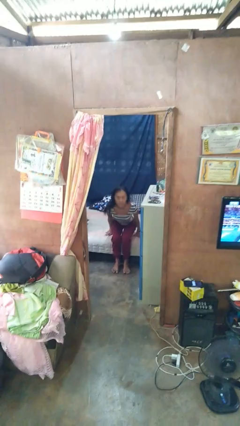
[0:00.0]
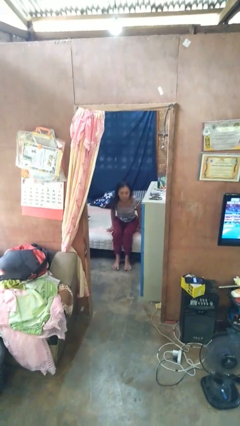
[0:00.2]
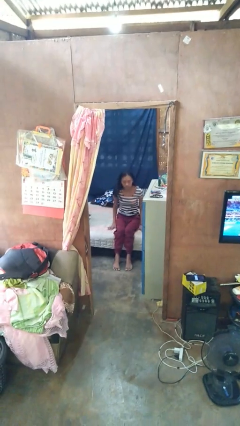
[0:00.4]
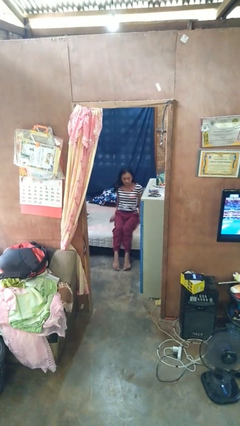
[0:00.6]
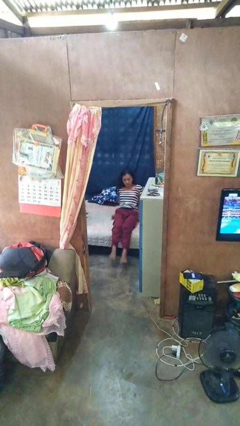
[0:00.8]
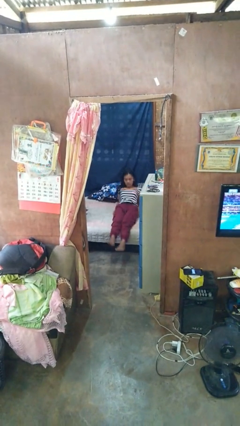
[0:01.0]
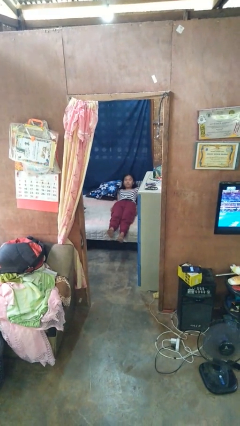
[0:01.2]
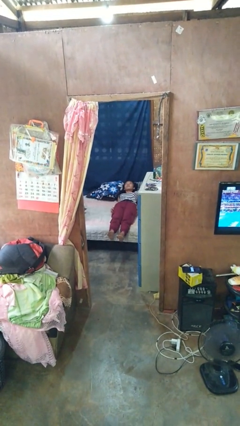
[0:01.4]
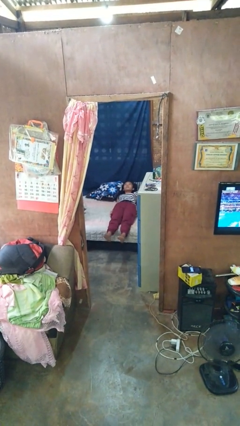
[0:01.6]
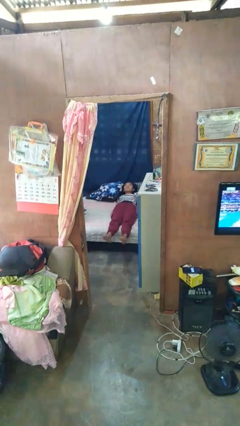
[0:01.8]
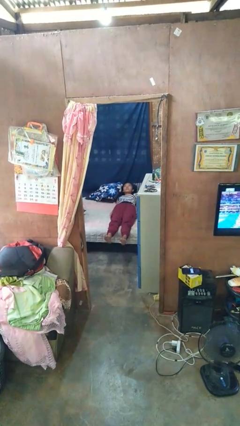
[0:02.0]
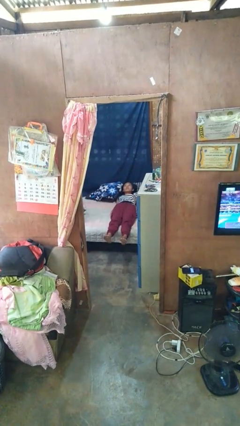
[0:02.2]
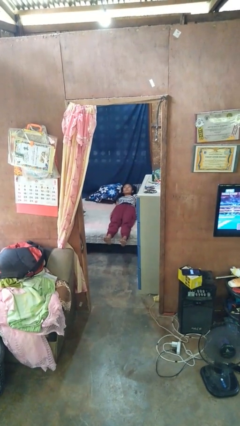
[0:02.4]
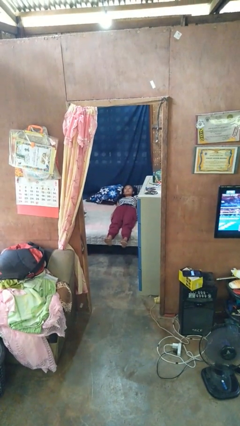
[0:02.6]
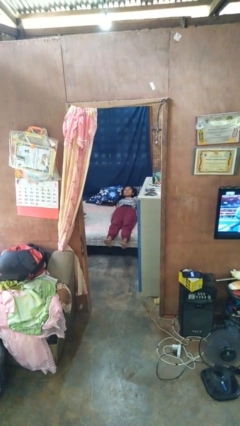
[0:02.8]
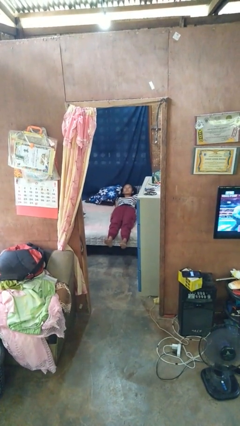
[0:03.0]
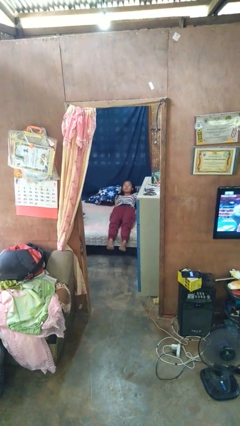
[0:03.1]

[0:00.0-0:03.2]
person lies down on bed

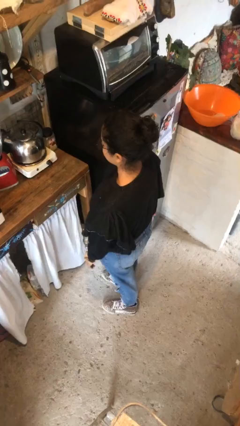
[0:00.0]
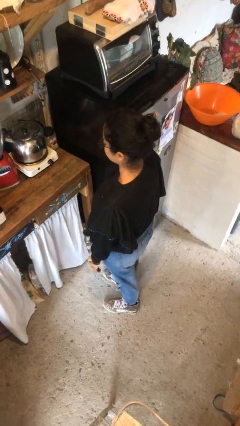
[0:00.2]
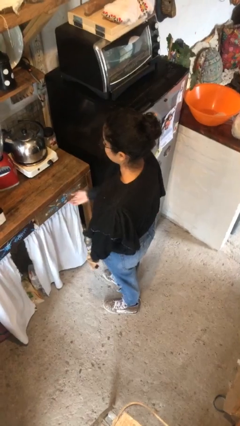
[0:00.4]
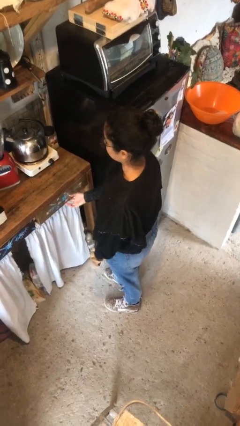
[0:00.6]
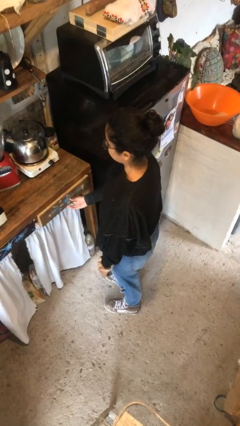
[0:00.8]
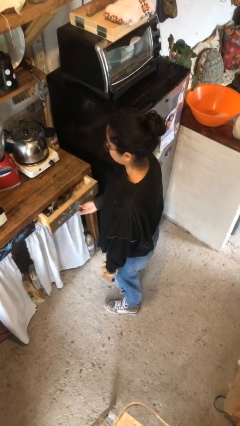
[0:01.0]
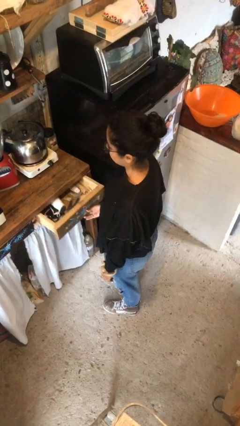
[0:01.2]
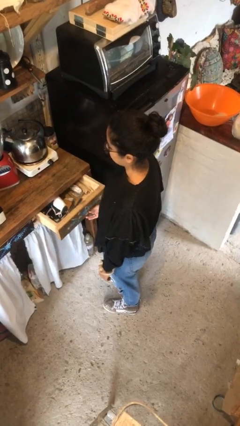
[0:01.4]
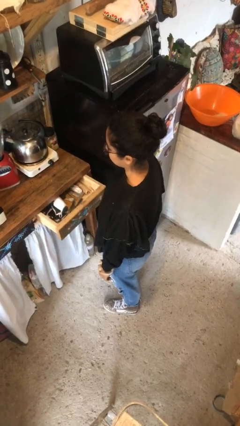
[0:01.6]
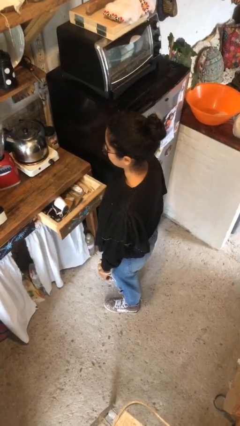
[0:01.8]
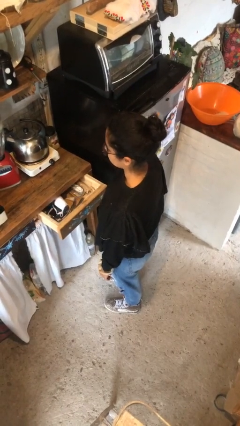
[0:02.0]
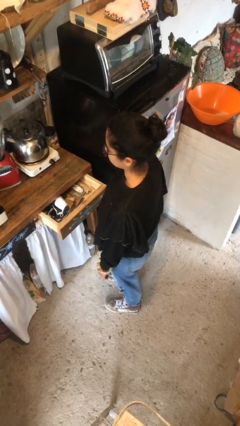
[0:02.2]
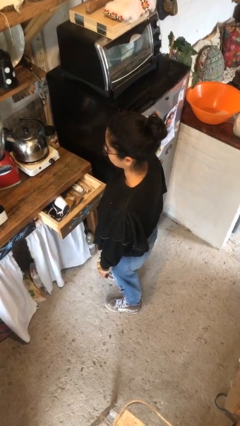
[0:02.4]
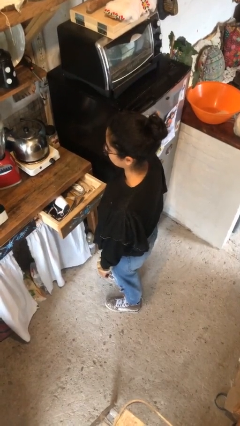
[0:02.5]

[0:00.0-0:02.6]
person opens kitchen drawer

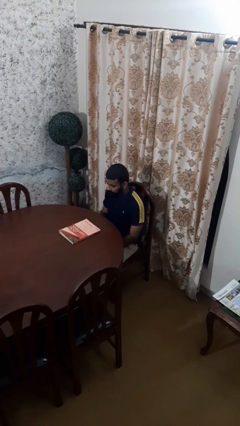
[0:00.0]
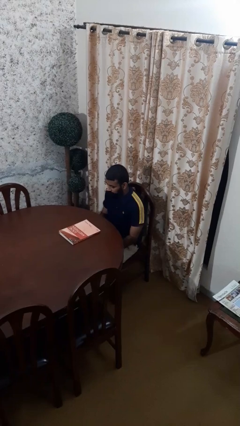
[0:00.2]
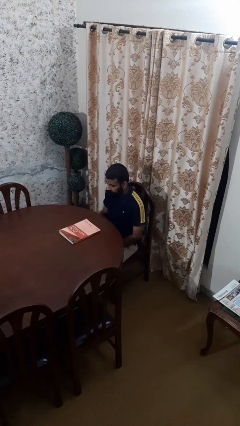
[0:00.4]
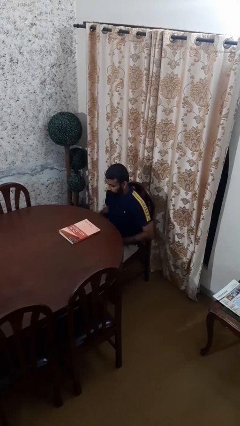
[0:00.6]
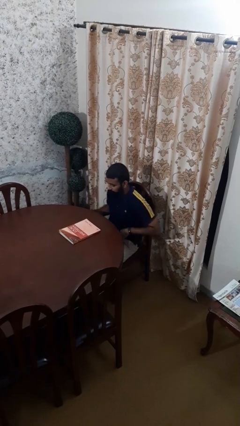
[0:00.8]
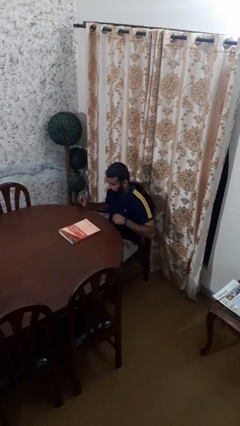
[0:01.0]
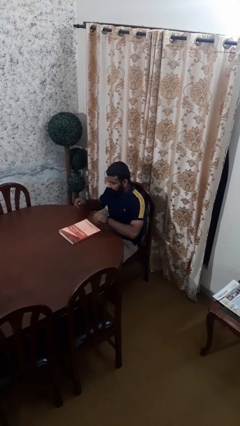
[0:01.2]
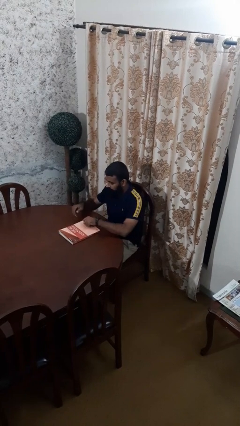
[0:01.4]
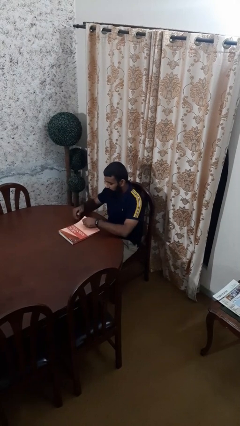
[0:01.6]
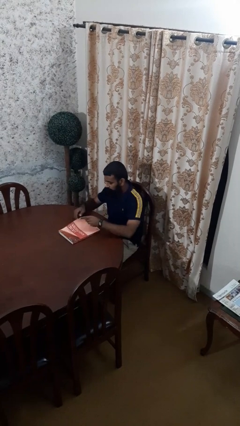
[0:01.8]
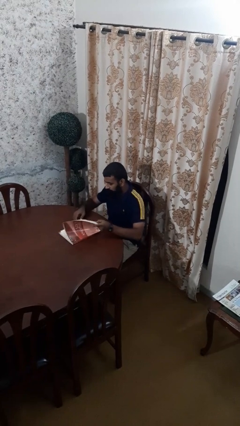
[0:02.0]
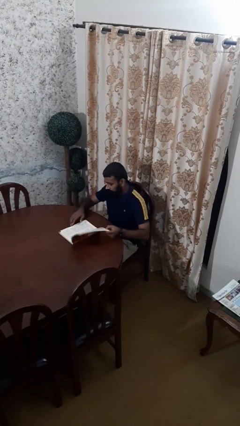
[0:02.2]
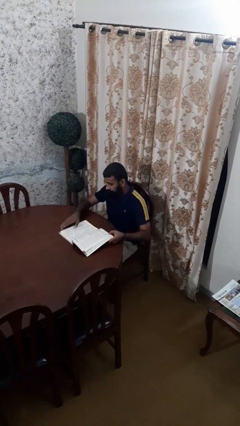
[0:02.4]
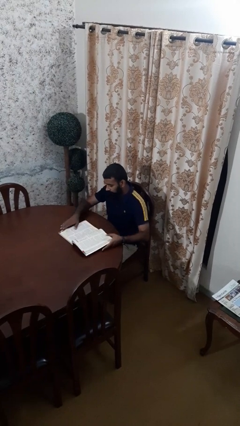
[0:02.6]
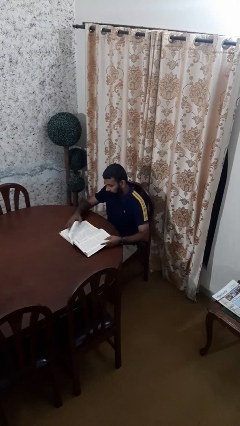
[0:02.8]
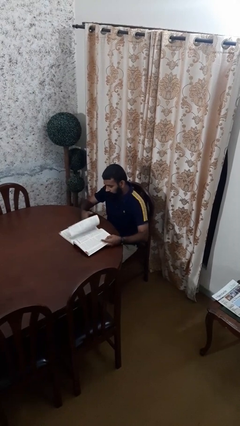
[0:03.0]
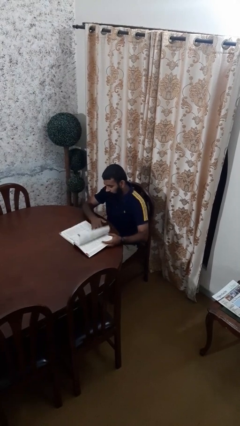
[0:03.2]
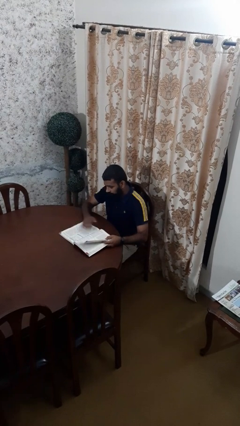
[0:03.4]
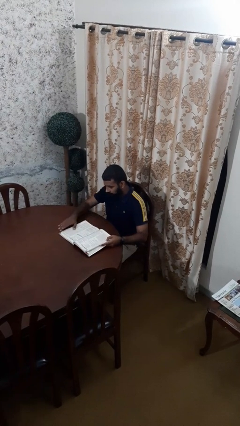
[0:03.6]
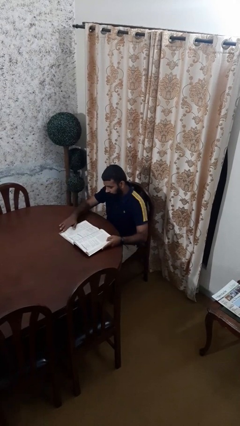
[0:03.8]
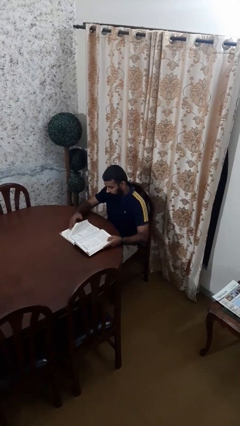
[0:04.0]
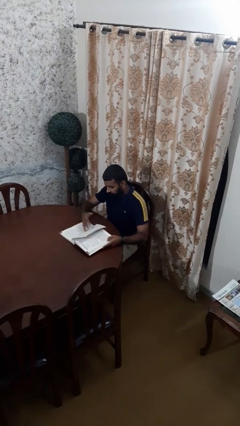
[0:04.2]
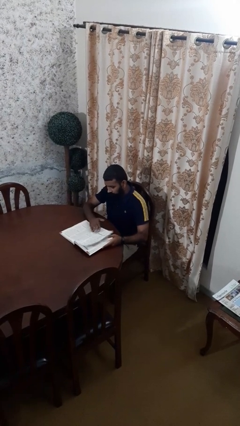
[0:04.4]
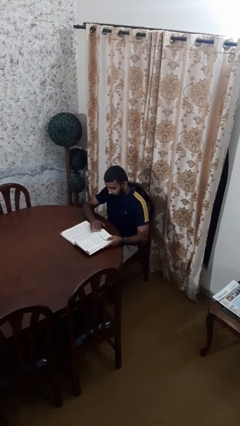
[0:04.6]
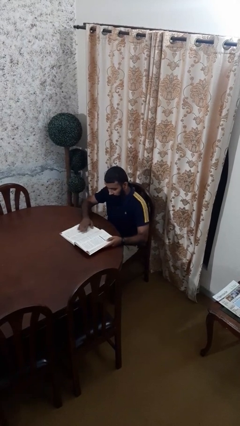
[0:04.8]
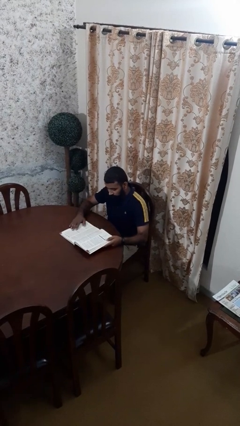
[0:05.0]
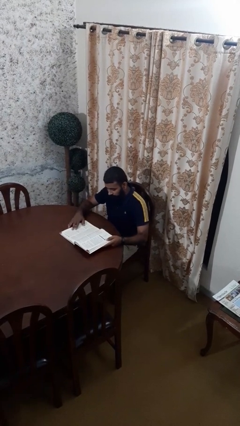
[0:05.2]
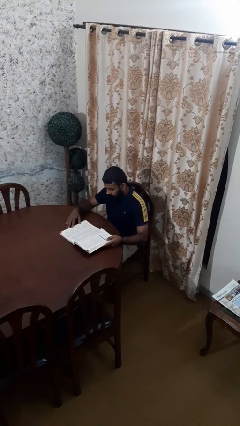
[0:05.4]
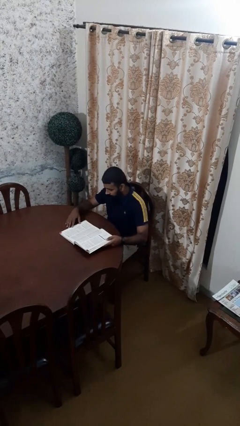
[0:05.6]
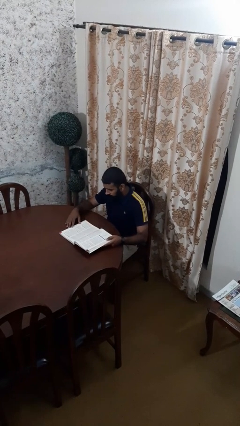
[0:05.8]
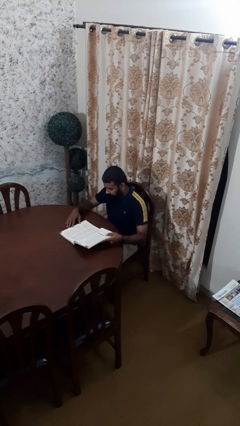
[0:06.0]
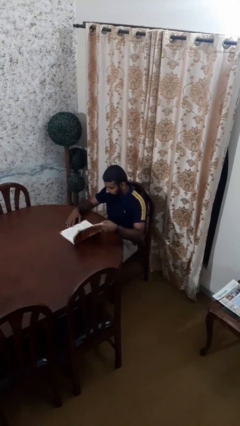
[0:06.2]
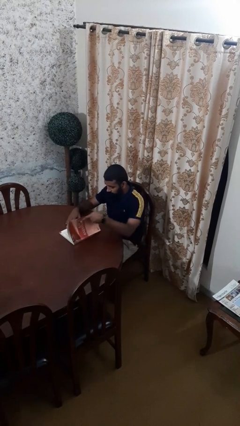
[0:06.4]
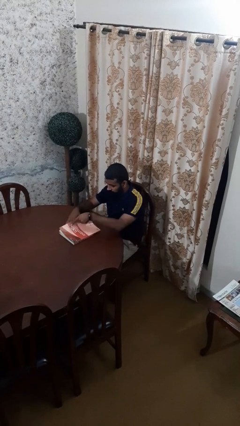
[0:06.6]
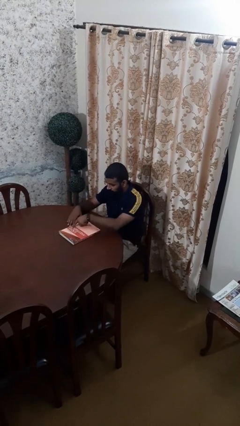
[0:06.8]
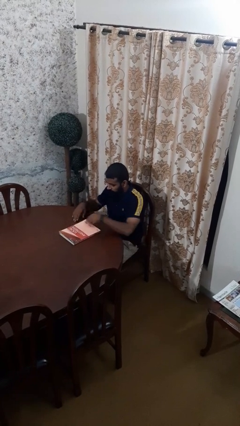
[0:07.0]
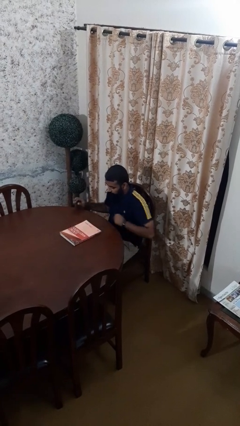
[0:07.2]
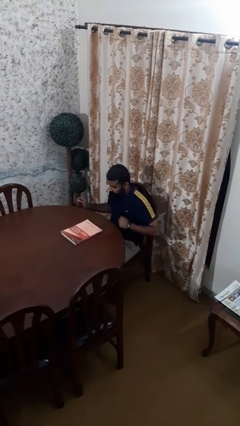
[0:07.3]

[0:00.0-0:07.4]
person reads book

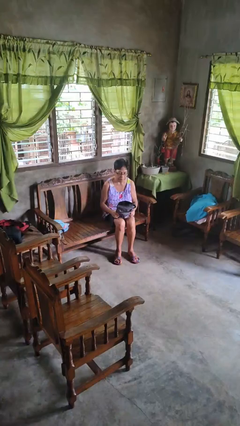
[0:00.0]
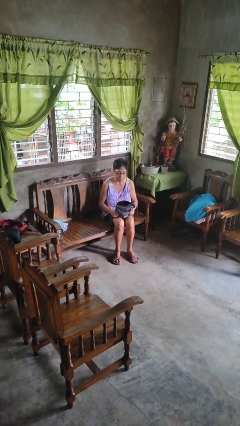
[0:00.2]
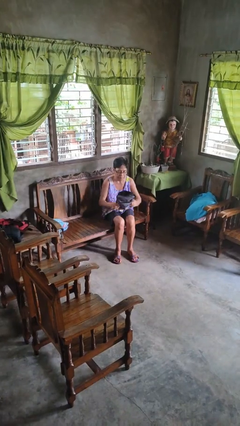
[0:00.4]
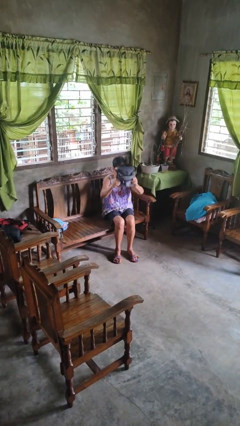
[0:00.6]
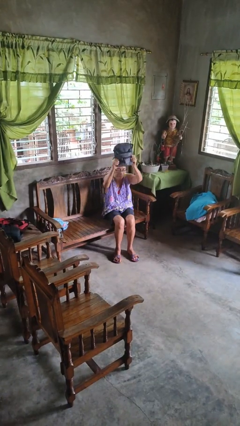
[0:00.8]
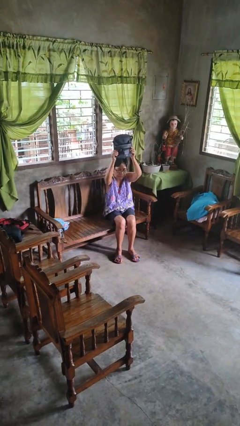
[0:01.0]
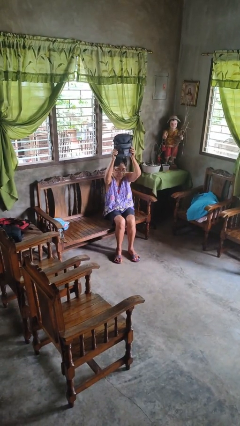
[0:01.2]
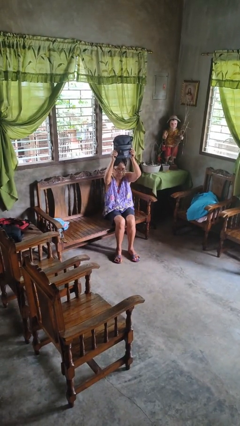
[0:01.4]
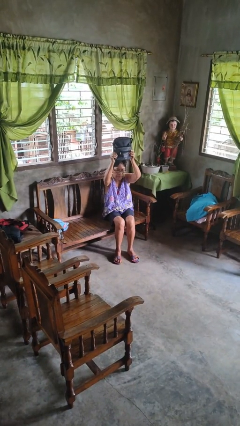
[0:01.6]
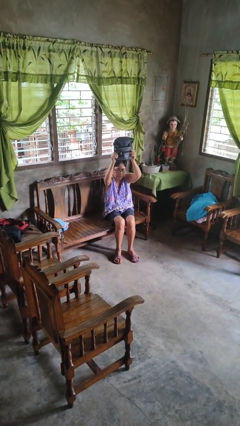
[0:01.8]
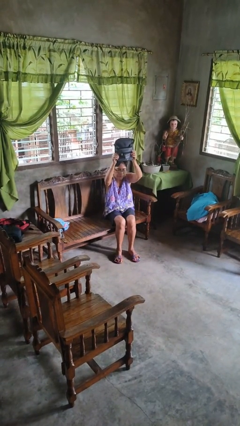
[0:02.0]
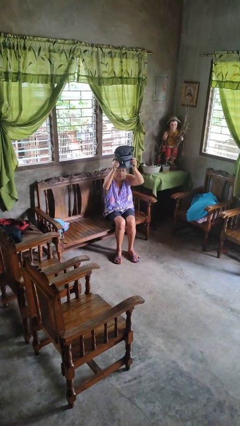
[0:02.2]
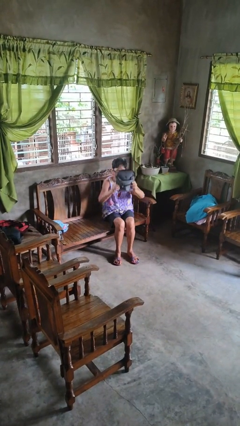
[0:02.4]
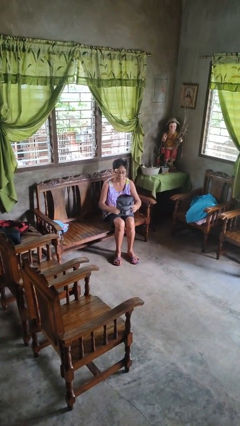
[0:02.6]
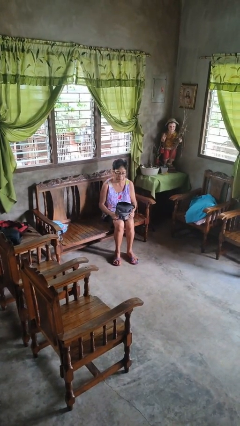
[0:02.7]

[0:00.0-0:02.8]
person holds object above head

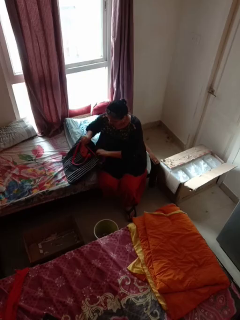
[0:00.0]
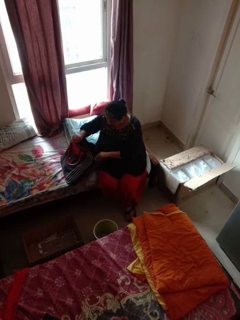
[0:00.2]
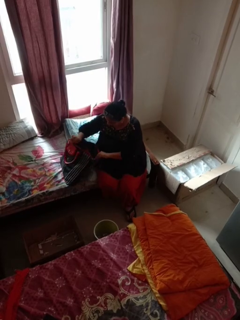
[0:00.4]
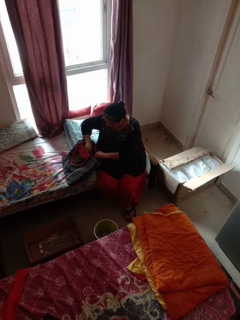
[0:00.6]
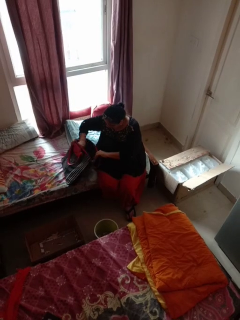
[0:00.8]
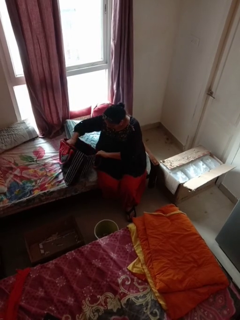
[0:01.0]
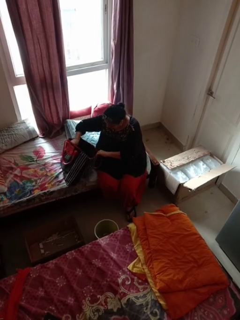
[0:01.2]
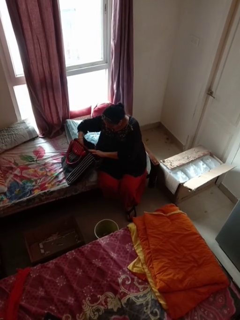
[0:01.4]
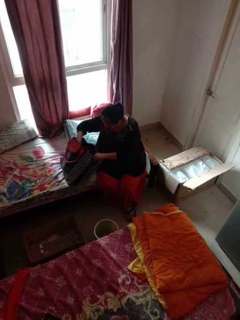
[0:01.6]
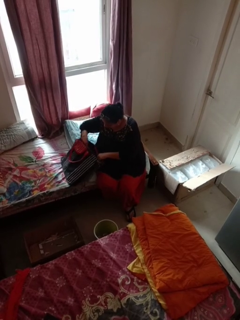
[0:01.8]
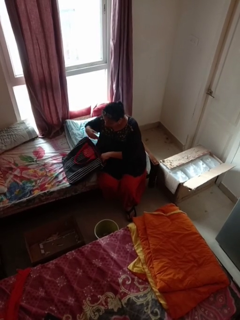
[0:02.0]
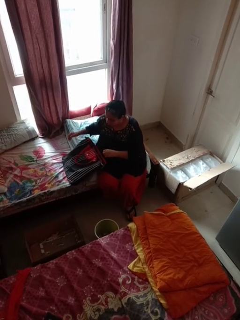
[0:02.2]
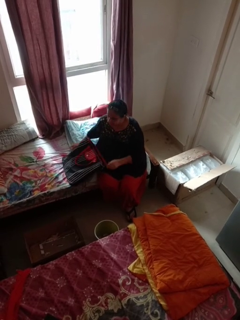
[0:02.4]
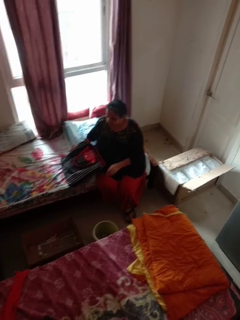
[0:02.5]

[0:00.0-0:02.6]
person searches in bag
